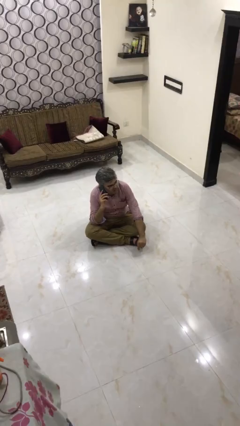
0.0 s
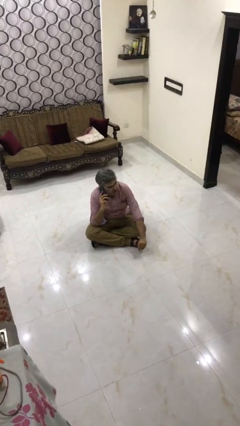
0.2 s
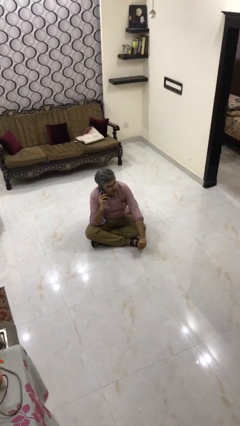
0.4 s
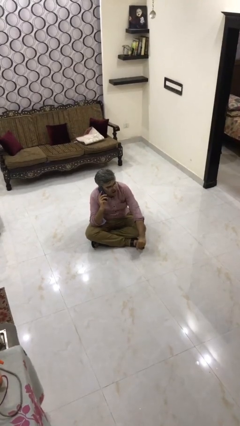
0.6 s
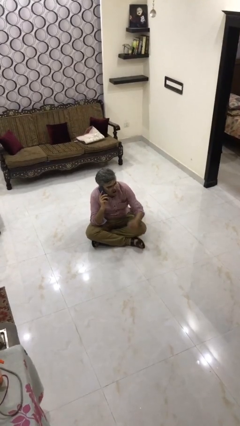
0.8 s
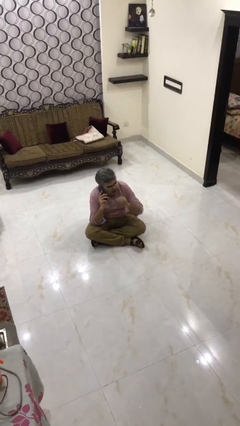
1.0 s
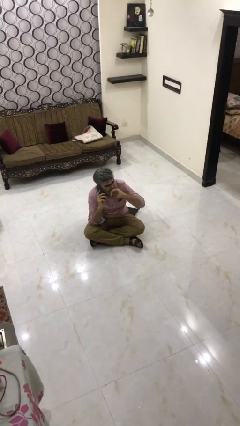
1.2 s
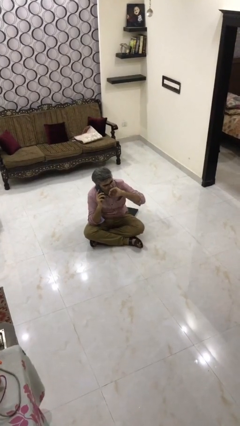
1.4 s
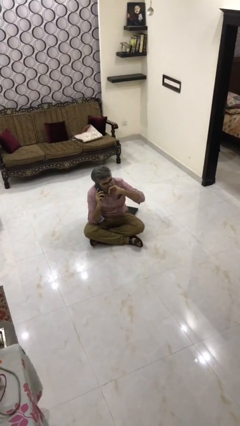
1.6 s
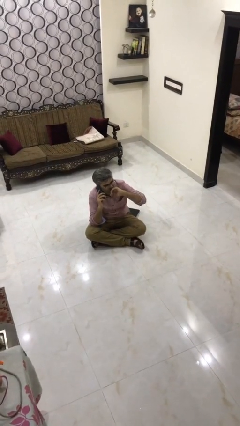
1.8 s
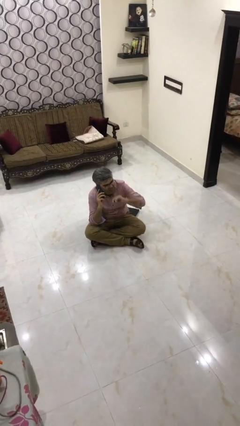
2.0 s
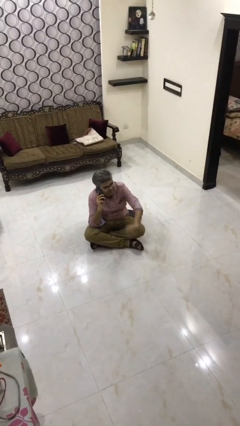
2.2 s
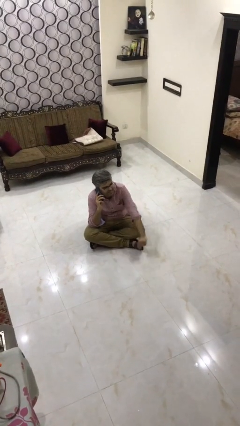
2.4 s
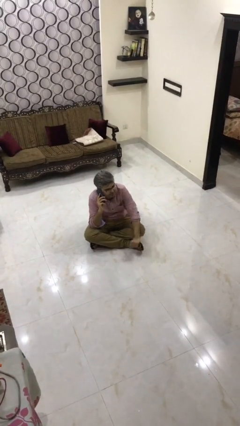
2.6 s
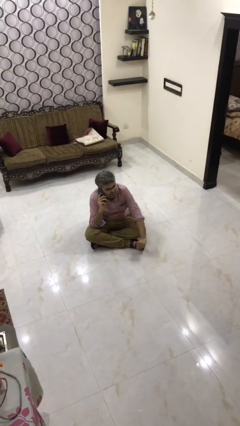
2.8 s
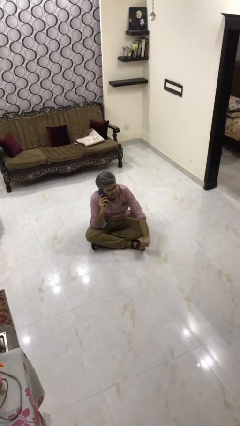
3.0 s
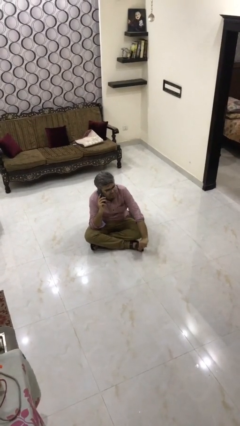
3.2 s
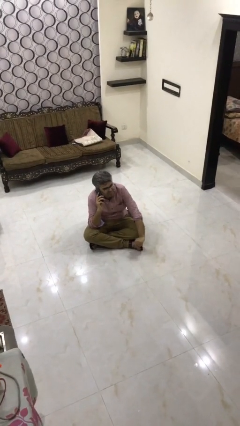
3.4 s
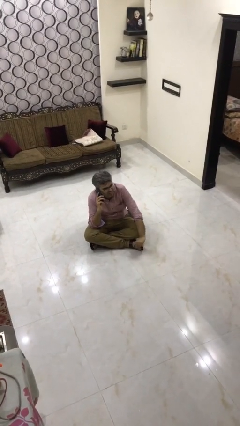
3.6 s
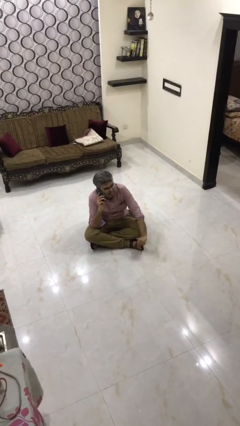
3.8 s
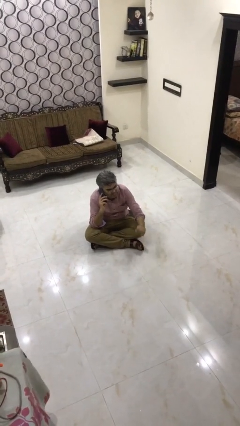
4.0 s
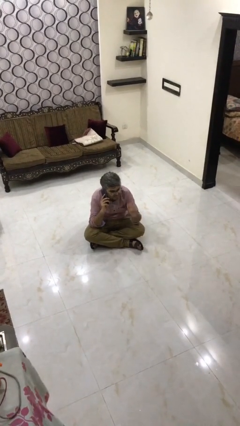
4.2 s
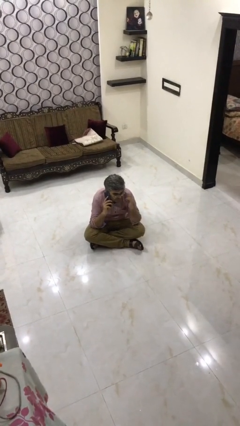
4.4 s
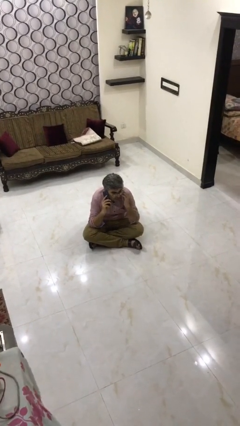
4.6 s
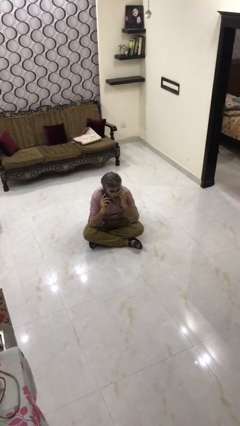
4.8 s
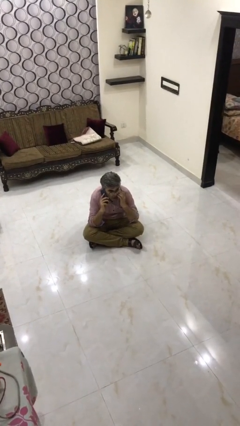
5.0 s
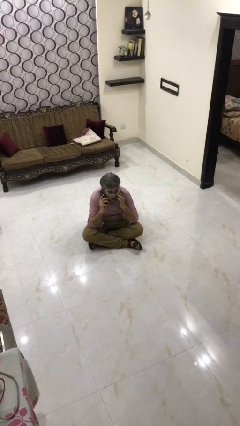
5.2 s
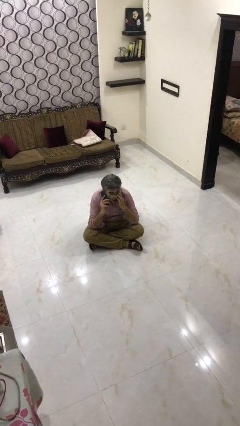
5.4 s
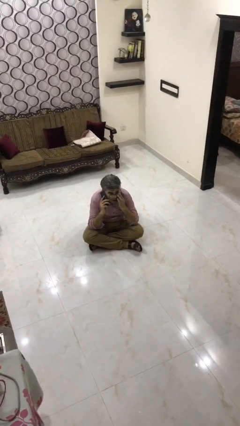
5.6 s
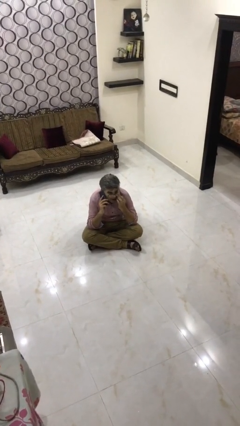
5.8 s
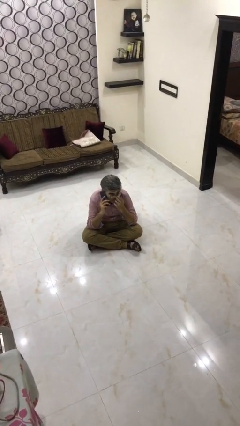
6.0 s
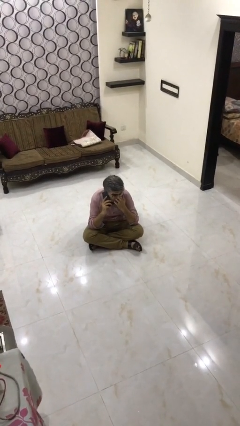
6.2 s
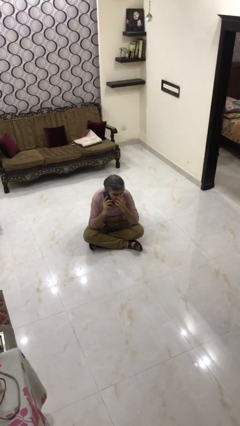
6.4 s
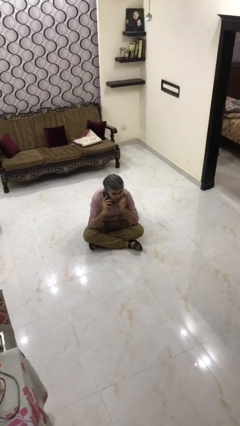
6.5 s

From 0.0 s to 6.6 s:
person talks on phone

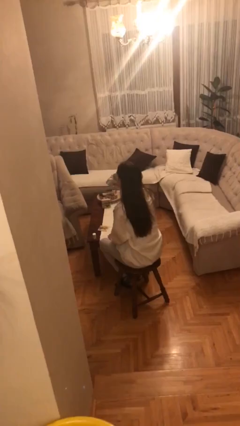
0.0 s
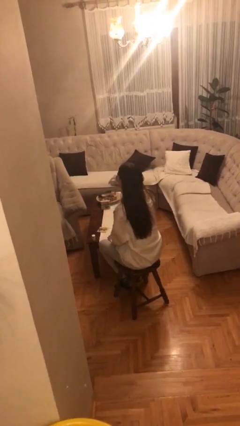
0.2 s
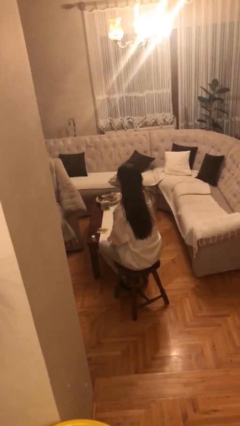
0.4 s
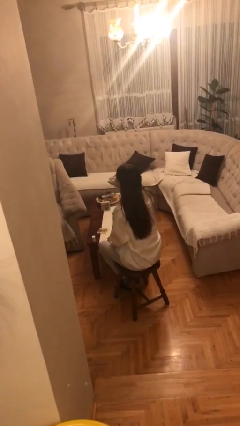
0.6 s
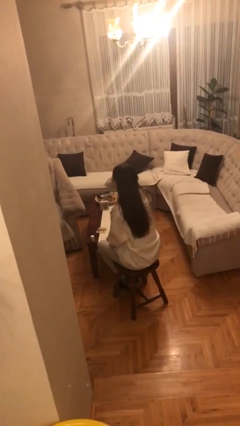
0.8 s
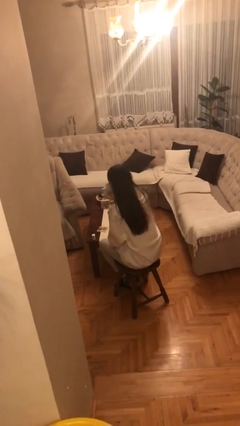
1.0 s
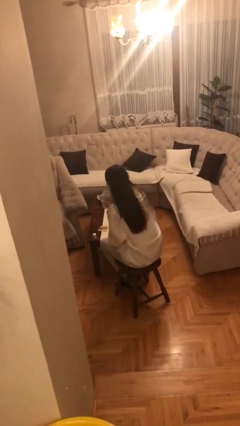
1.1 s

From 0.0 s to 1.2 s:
person drinks from cup

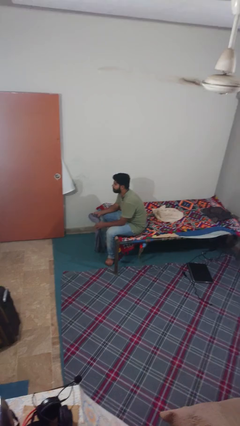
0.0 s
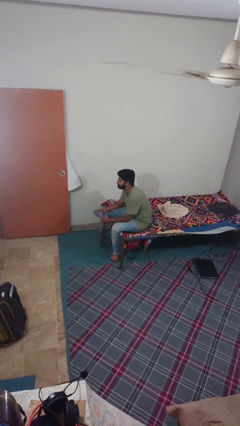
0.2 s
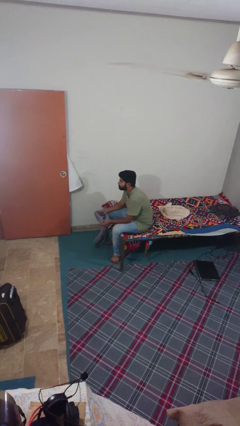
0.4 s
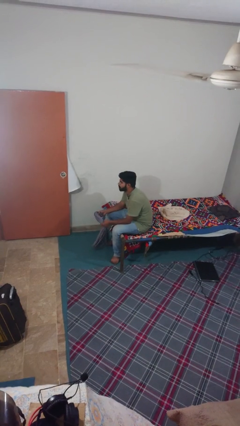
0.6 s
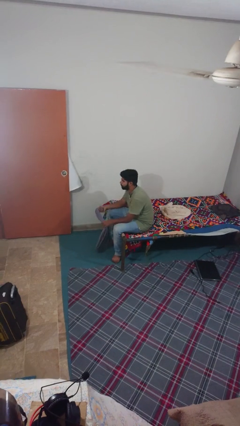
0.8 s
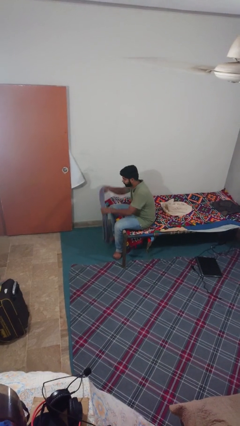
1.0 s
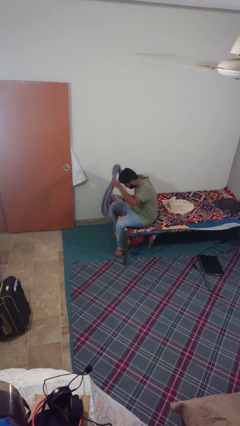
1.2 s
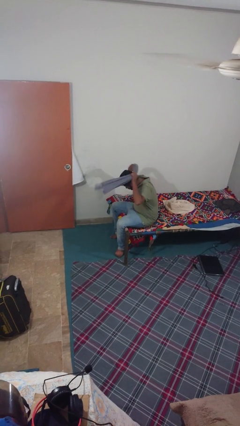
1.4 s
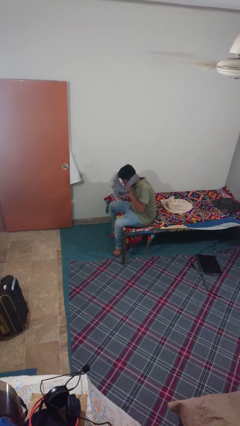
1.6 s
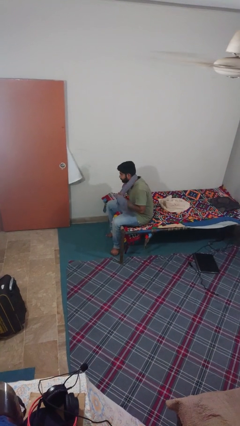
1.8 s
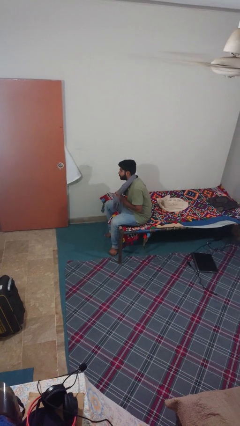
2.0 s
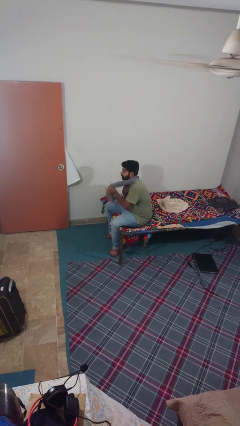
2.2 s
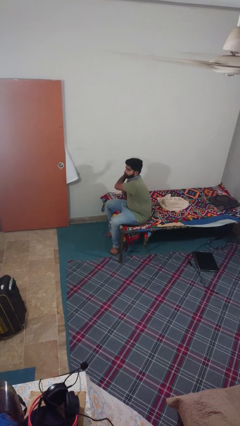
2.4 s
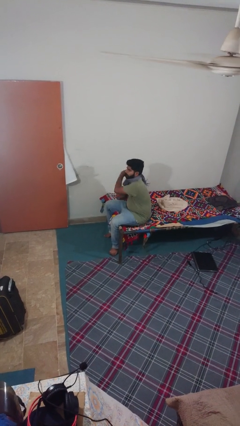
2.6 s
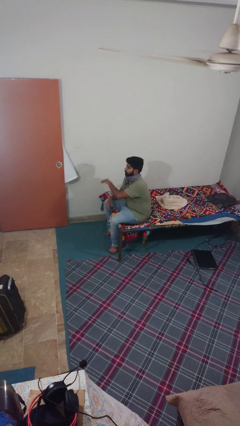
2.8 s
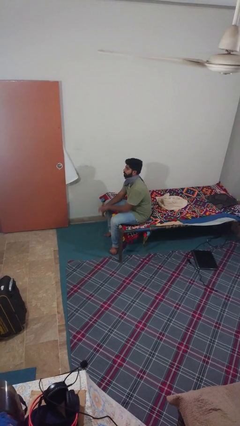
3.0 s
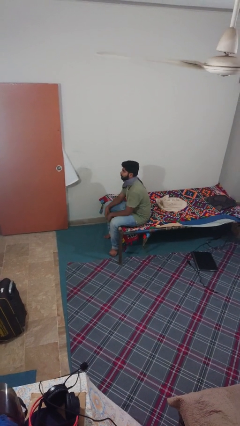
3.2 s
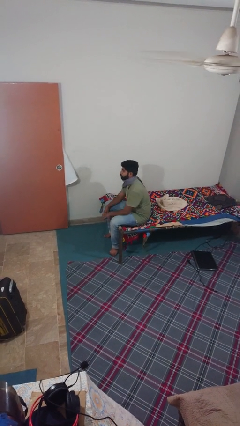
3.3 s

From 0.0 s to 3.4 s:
person puts on scarf

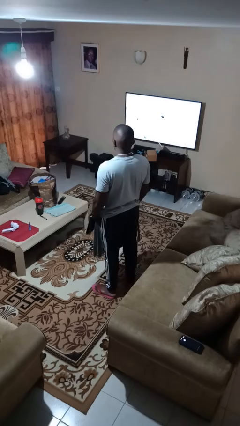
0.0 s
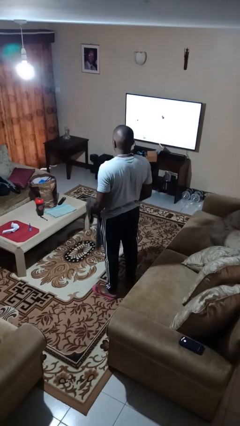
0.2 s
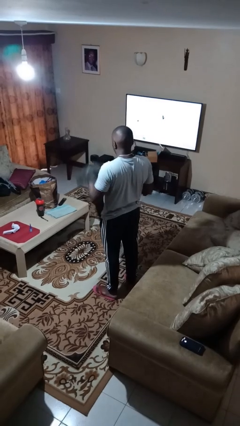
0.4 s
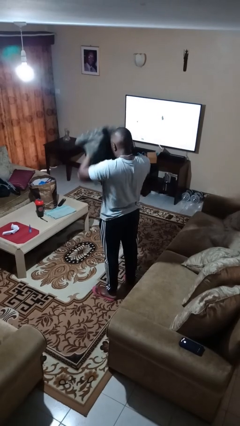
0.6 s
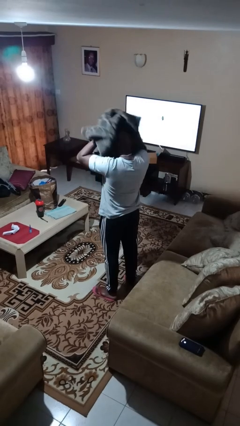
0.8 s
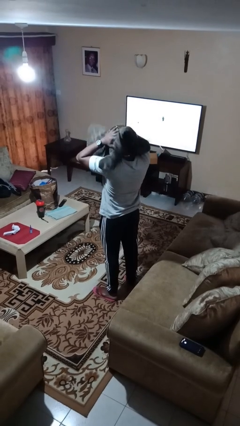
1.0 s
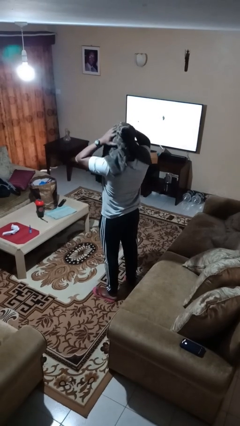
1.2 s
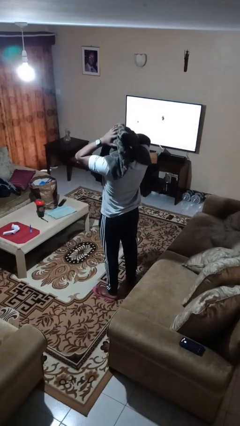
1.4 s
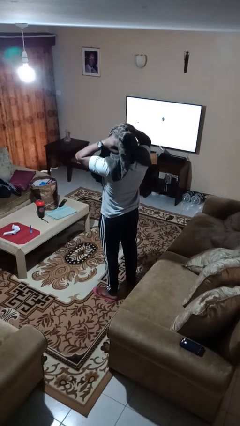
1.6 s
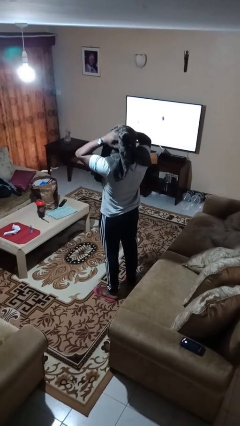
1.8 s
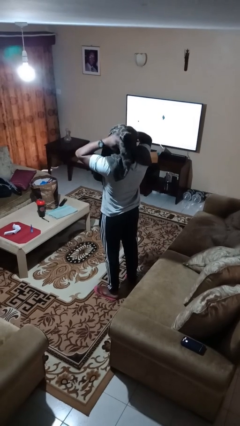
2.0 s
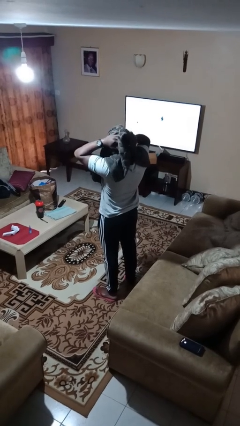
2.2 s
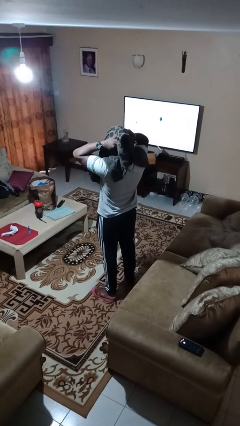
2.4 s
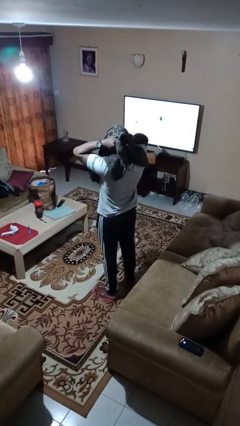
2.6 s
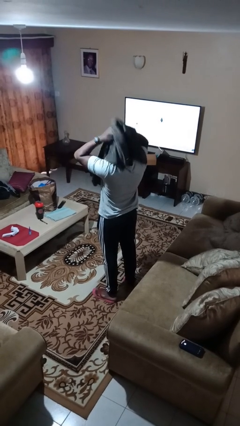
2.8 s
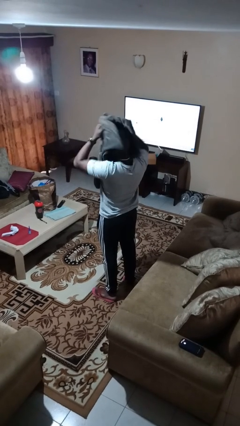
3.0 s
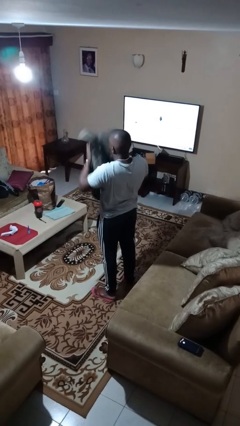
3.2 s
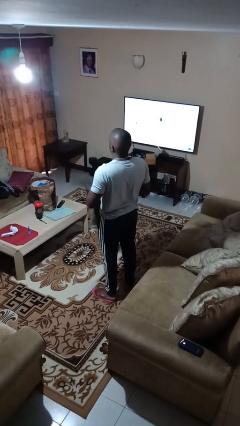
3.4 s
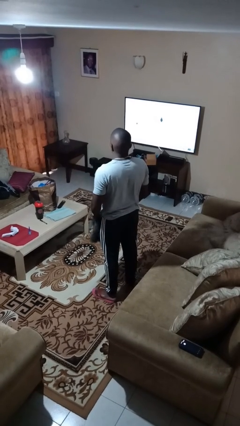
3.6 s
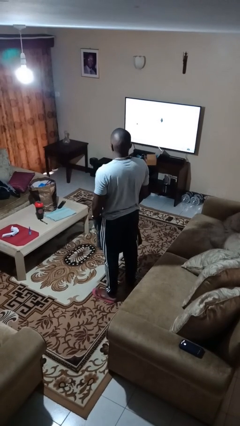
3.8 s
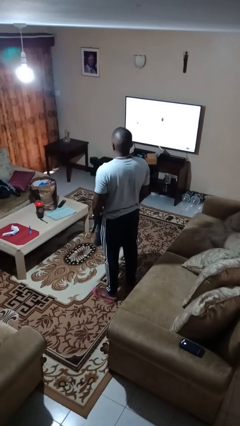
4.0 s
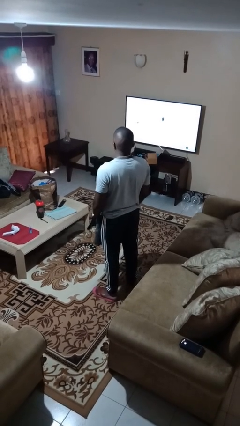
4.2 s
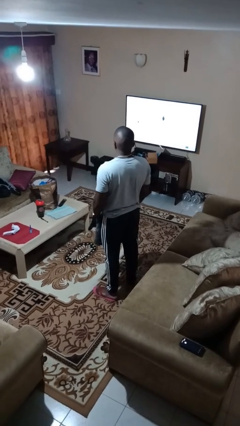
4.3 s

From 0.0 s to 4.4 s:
person dries hair with towel

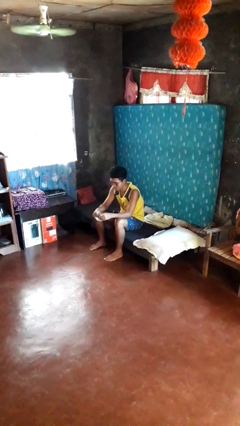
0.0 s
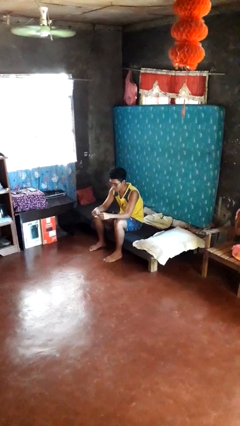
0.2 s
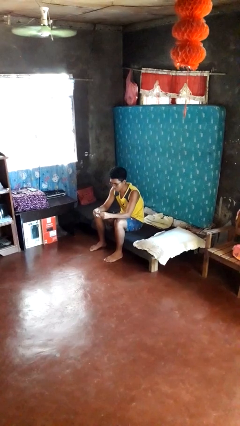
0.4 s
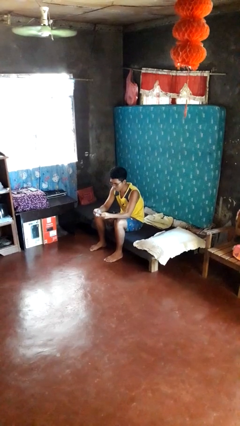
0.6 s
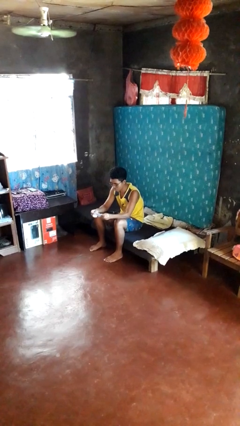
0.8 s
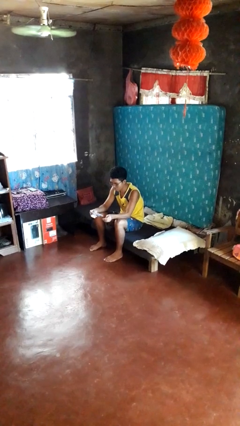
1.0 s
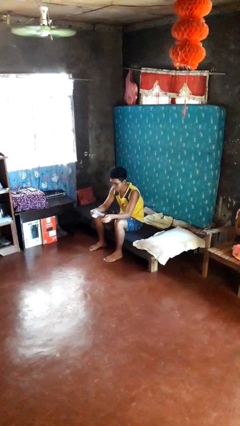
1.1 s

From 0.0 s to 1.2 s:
person tears paper

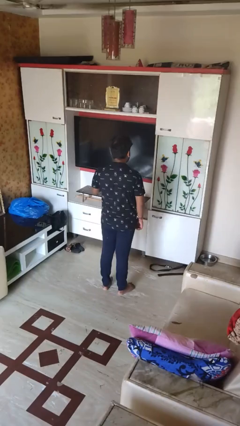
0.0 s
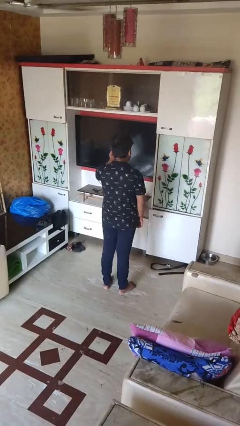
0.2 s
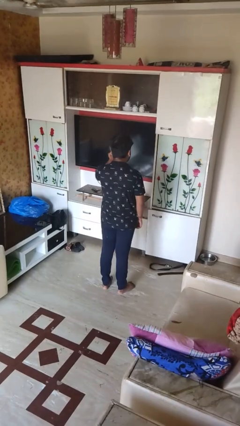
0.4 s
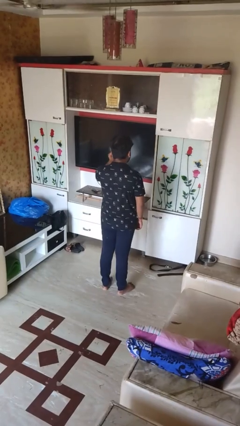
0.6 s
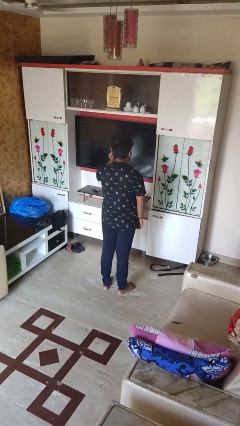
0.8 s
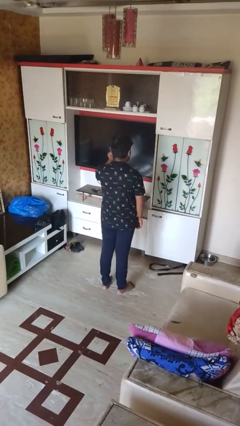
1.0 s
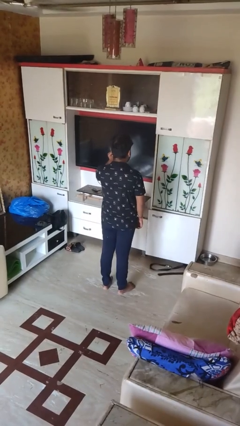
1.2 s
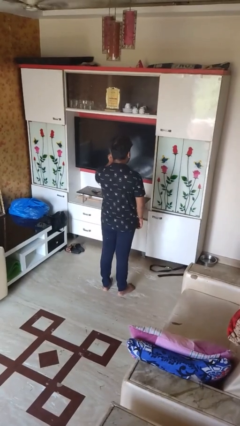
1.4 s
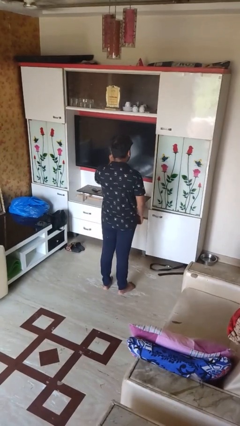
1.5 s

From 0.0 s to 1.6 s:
person touches earlobe
